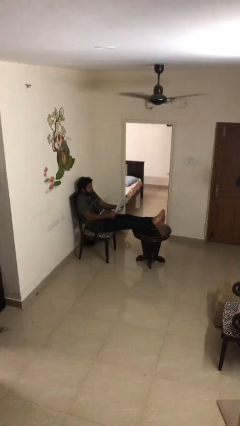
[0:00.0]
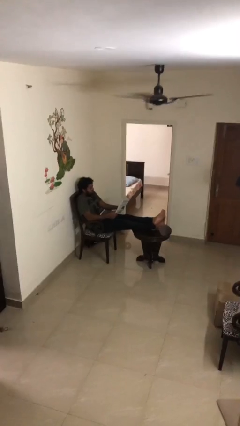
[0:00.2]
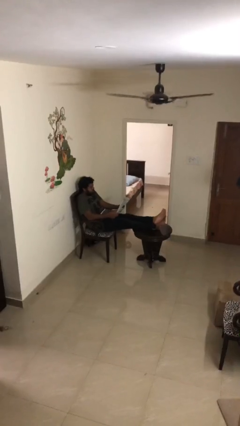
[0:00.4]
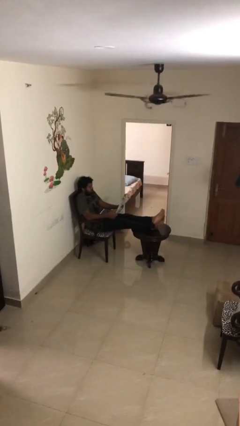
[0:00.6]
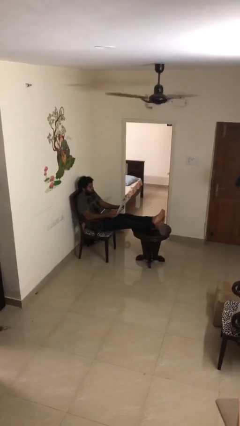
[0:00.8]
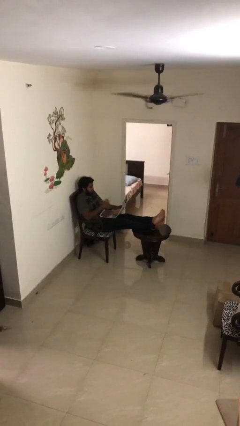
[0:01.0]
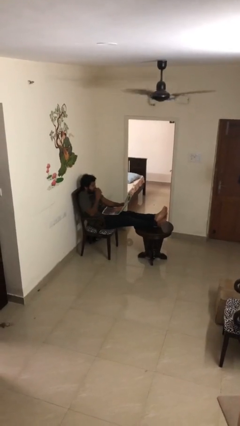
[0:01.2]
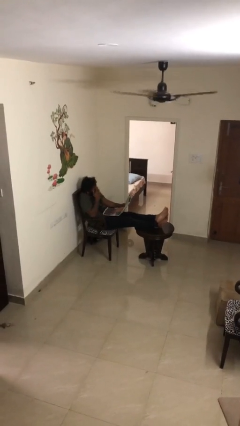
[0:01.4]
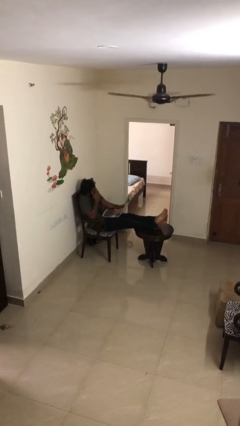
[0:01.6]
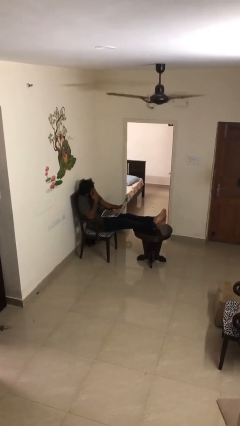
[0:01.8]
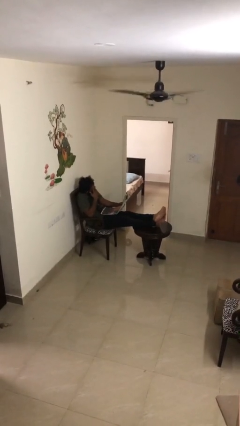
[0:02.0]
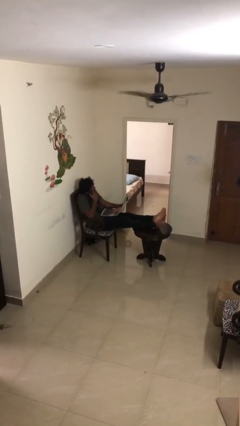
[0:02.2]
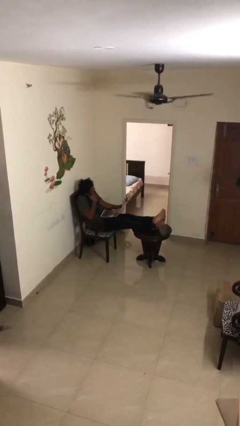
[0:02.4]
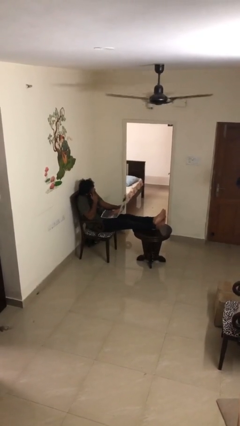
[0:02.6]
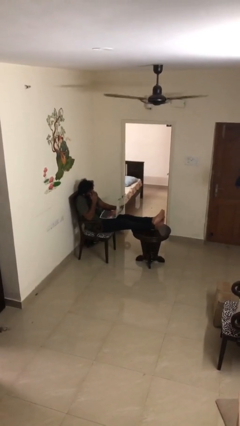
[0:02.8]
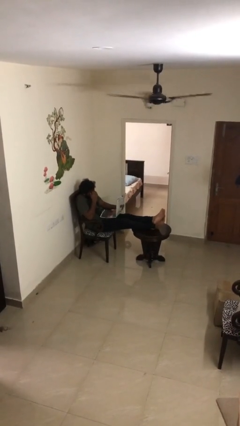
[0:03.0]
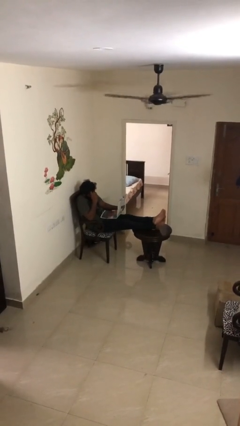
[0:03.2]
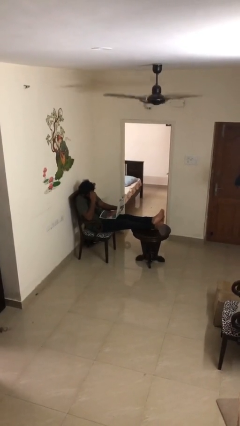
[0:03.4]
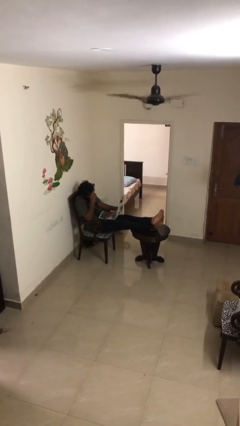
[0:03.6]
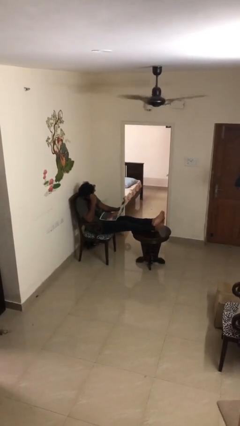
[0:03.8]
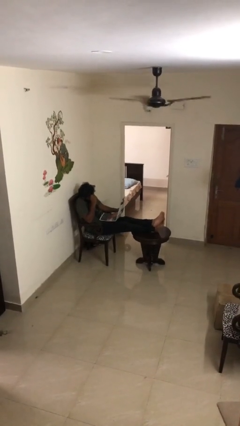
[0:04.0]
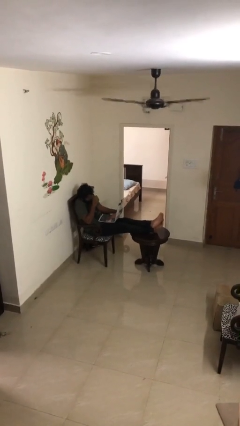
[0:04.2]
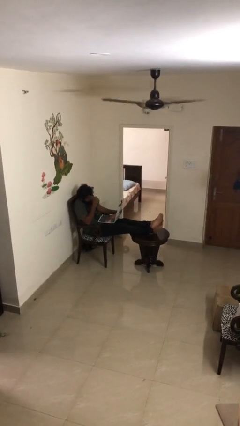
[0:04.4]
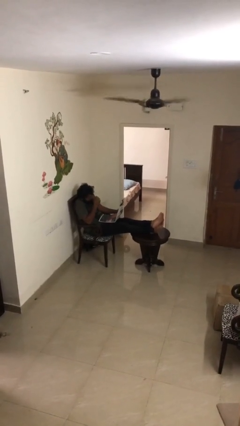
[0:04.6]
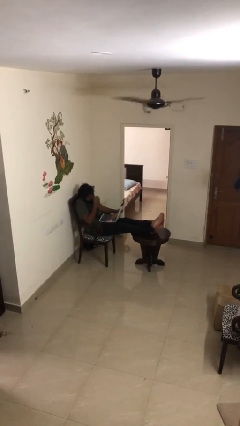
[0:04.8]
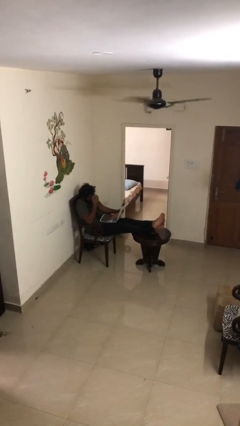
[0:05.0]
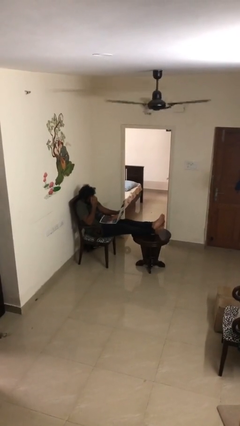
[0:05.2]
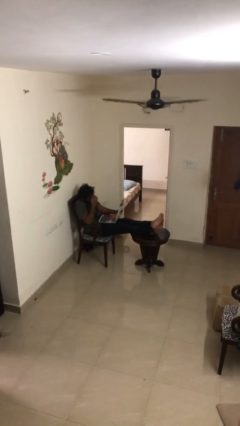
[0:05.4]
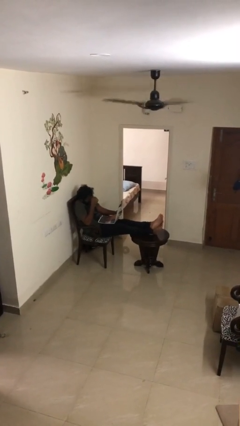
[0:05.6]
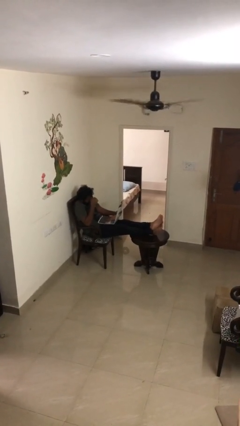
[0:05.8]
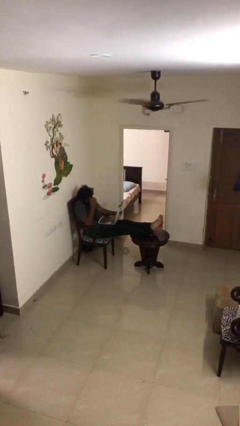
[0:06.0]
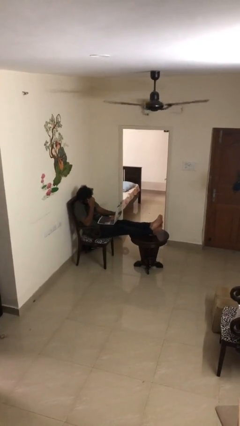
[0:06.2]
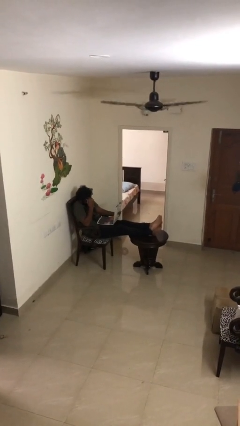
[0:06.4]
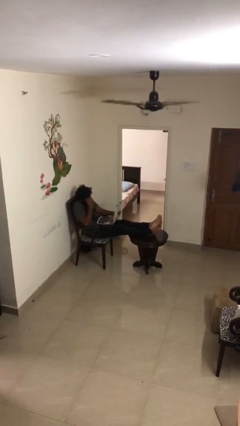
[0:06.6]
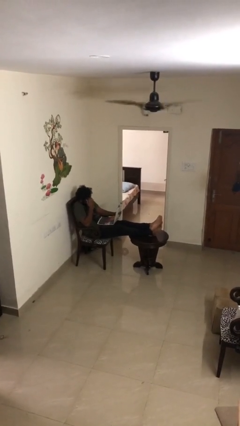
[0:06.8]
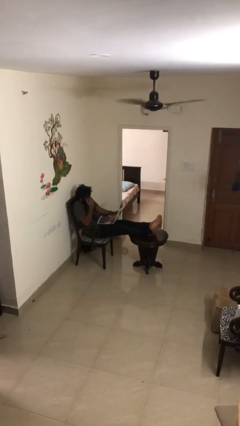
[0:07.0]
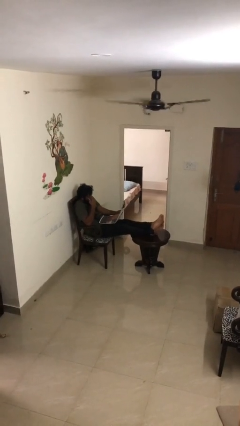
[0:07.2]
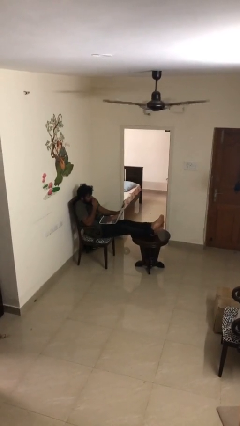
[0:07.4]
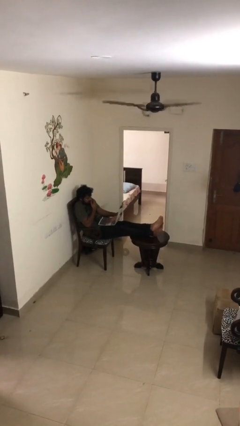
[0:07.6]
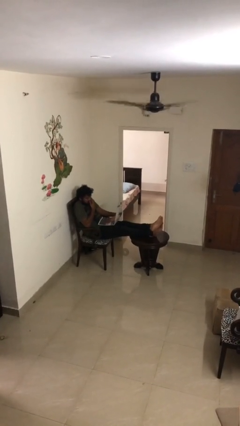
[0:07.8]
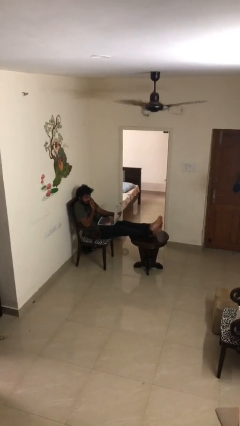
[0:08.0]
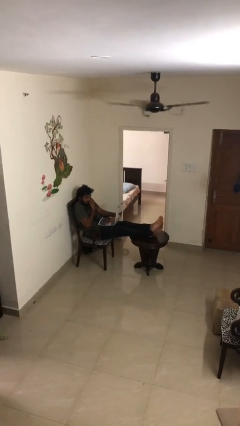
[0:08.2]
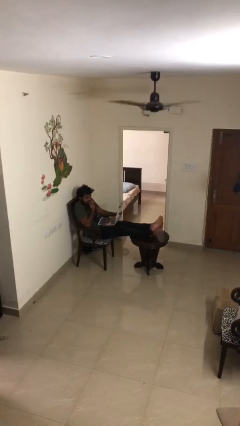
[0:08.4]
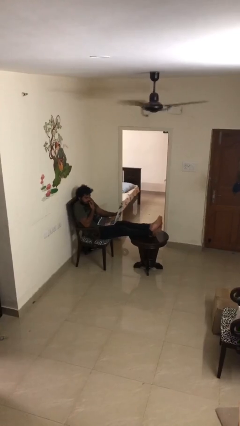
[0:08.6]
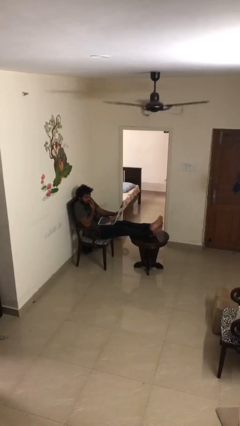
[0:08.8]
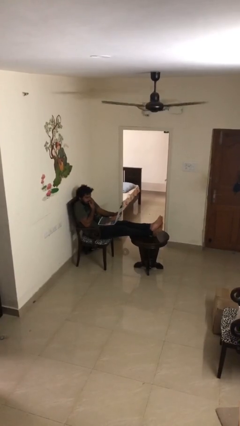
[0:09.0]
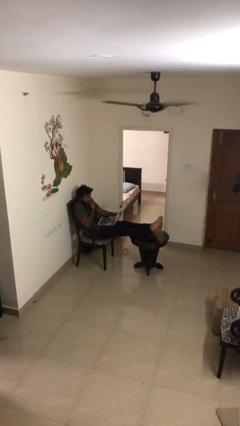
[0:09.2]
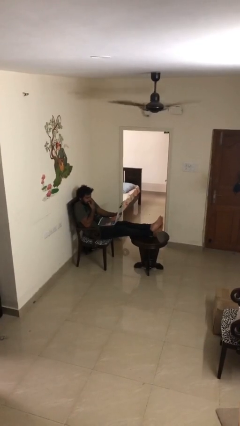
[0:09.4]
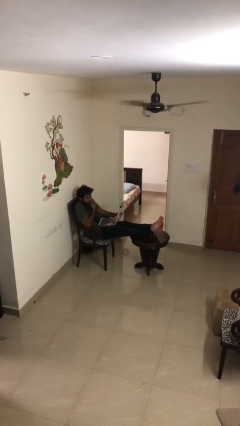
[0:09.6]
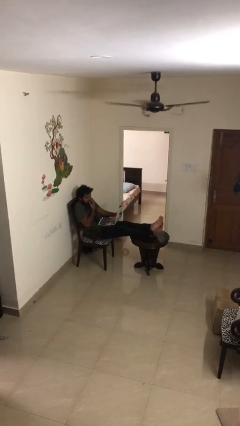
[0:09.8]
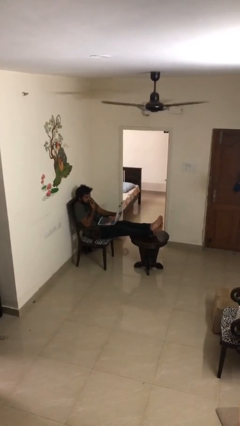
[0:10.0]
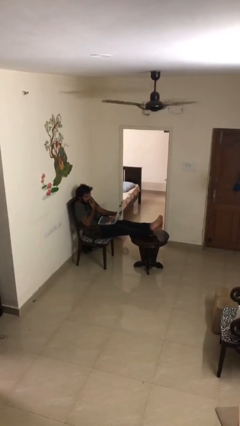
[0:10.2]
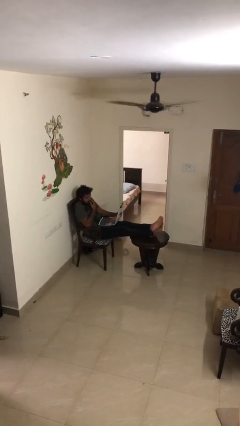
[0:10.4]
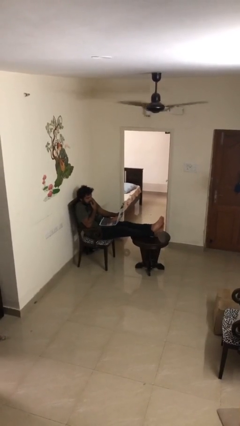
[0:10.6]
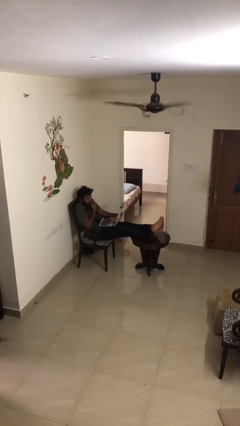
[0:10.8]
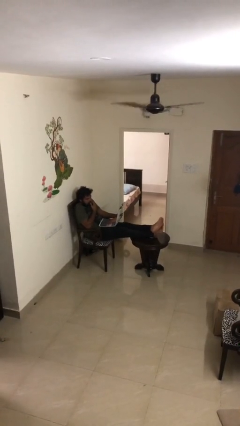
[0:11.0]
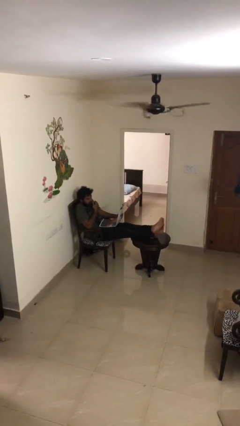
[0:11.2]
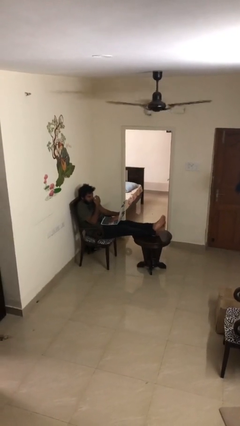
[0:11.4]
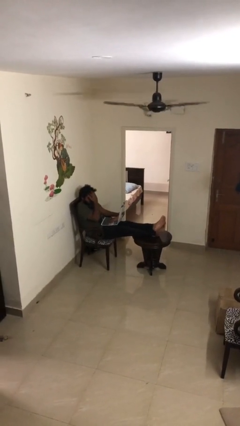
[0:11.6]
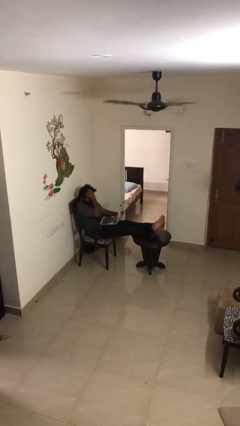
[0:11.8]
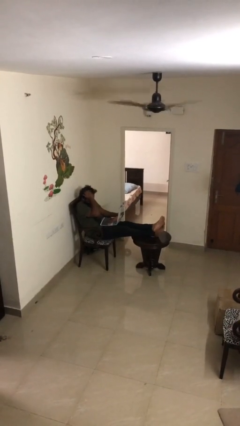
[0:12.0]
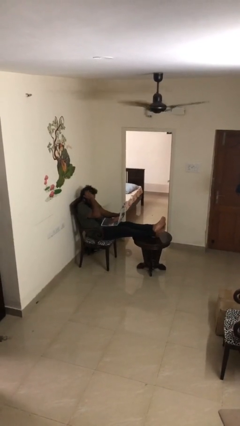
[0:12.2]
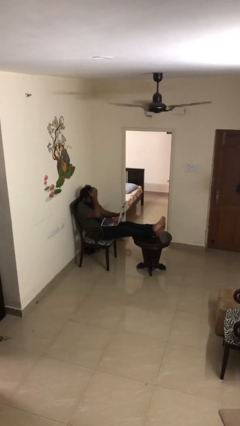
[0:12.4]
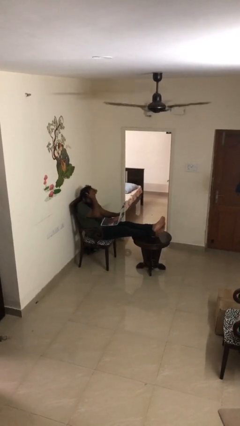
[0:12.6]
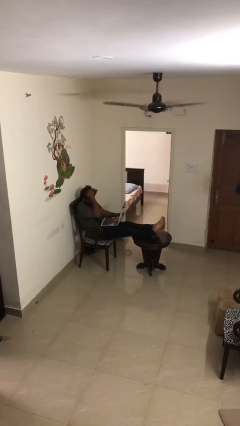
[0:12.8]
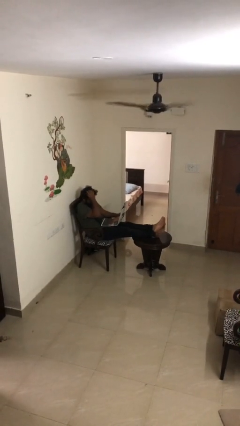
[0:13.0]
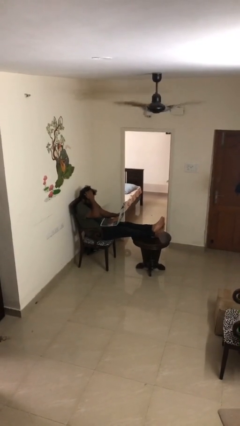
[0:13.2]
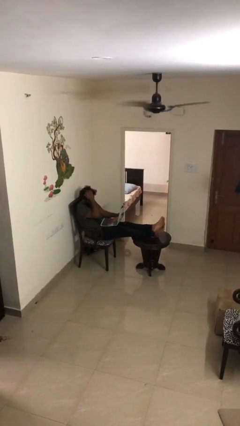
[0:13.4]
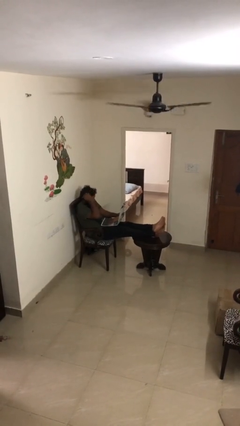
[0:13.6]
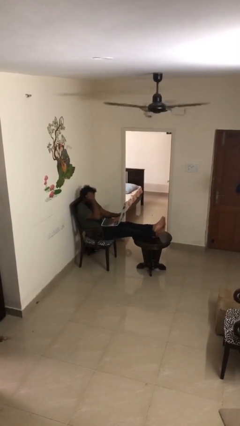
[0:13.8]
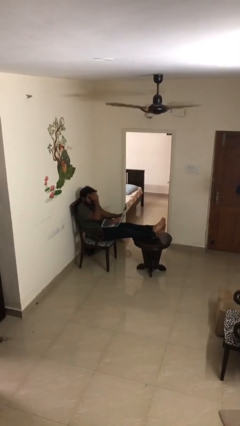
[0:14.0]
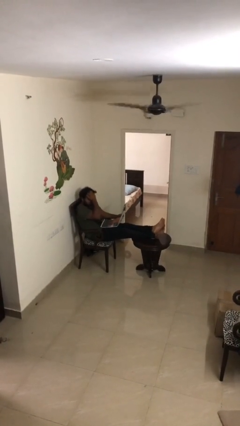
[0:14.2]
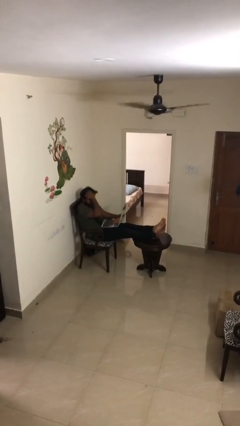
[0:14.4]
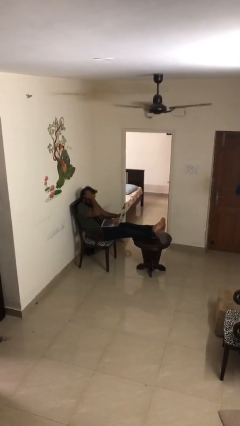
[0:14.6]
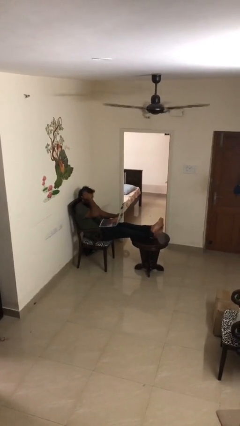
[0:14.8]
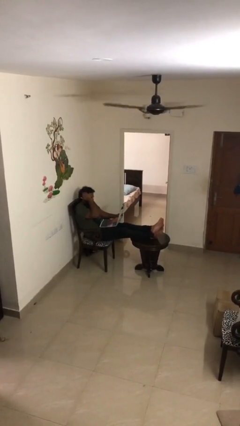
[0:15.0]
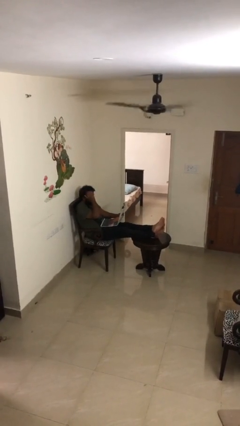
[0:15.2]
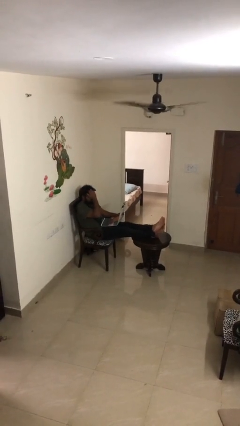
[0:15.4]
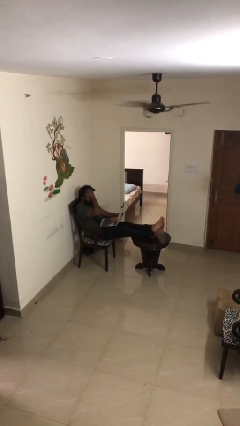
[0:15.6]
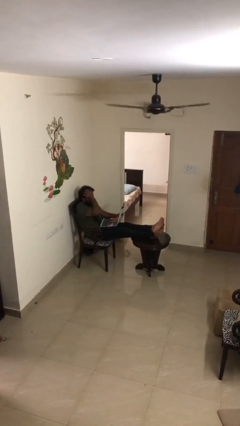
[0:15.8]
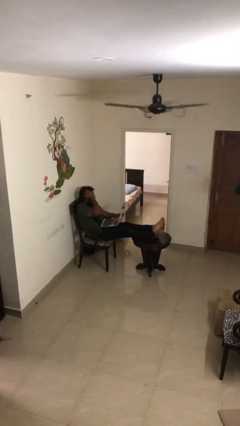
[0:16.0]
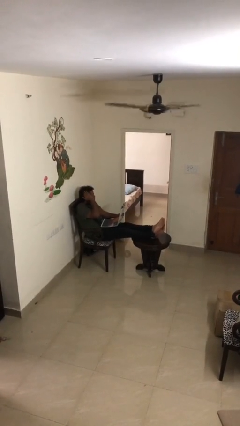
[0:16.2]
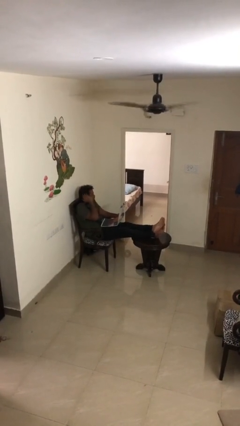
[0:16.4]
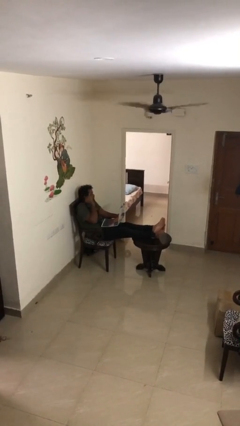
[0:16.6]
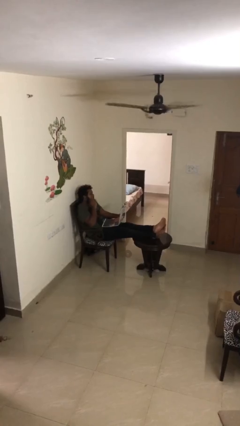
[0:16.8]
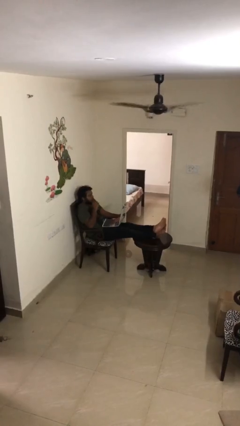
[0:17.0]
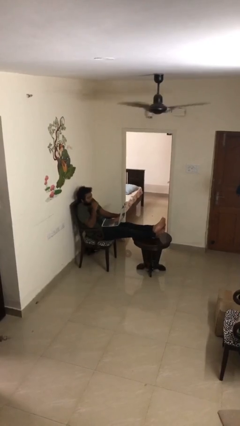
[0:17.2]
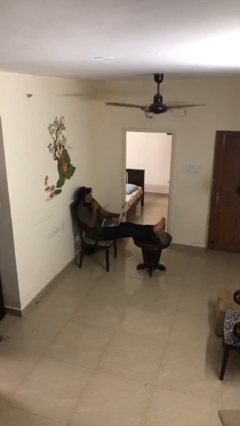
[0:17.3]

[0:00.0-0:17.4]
person reads document

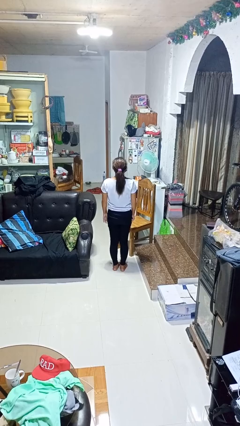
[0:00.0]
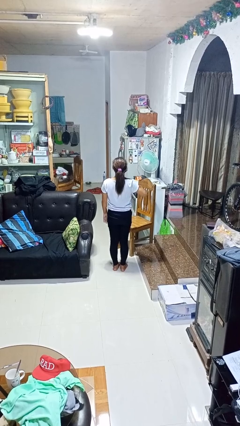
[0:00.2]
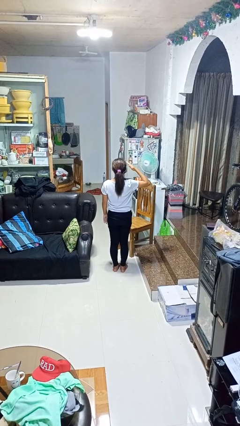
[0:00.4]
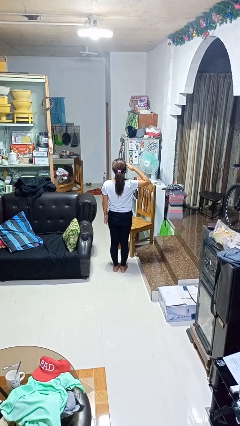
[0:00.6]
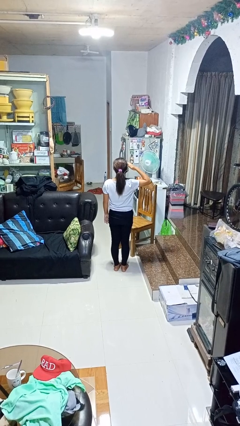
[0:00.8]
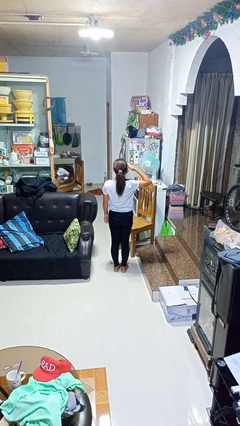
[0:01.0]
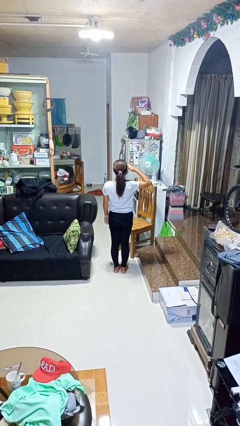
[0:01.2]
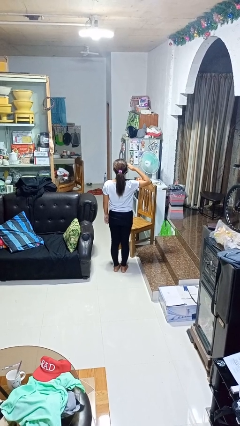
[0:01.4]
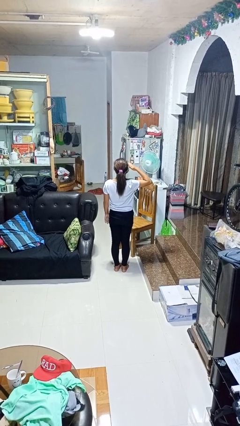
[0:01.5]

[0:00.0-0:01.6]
person salutes
